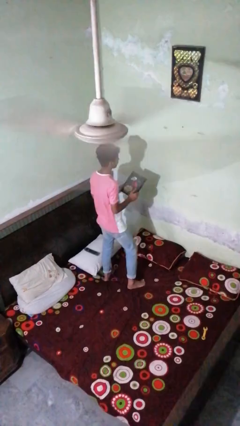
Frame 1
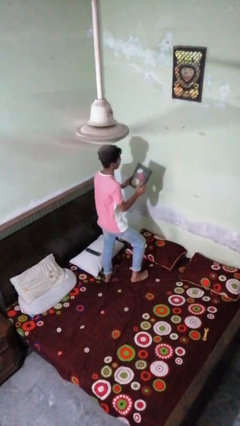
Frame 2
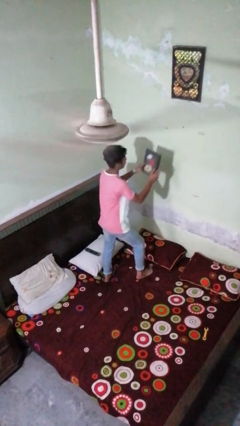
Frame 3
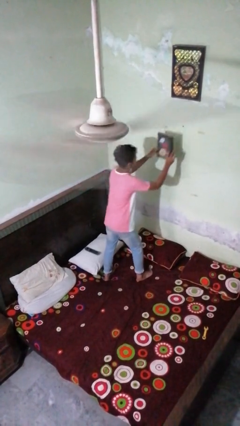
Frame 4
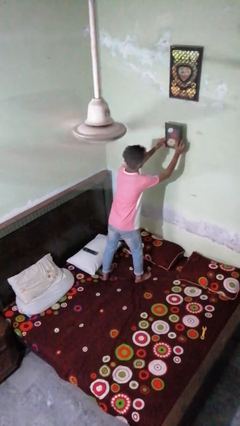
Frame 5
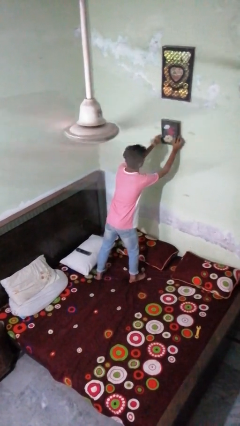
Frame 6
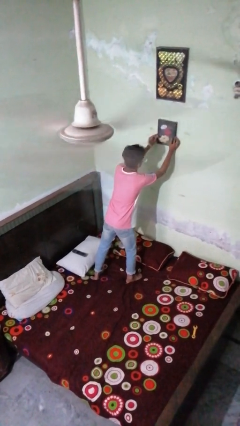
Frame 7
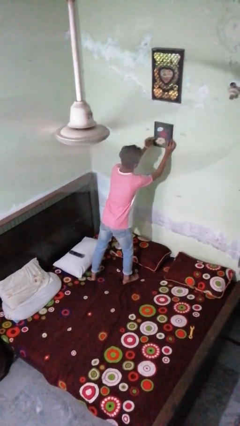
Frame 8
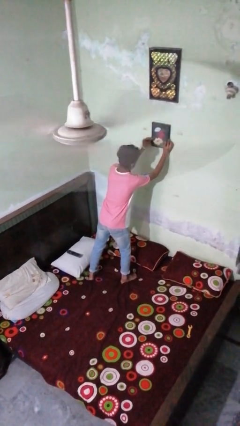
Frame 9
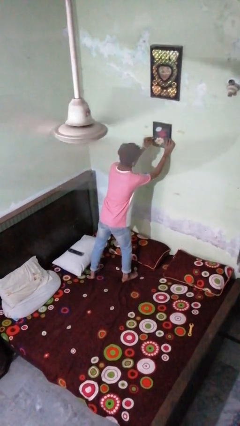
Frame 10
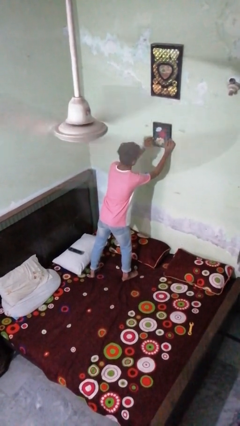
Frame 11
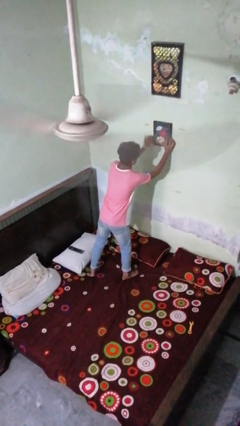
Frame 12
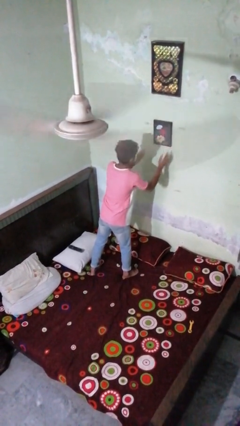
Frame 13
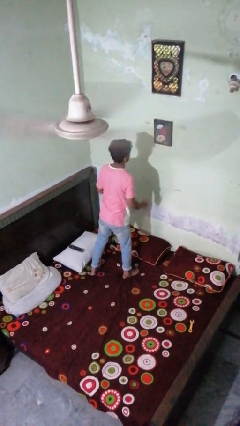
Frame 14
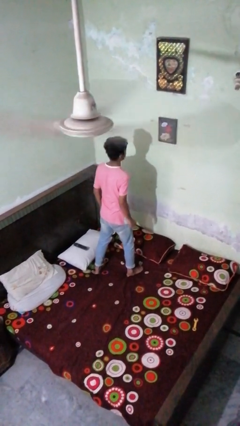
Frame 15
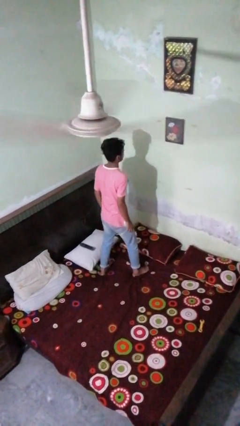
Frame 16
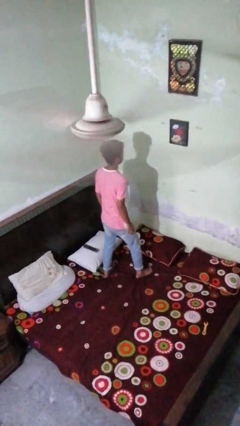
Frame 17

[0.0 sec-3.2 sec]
person puts up picture frame

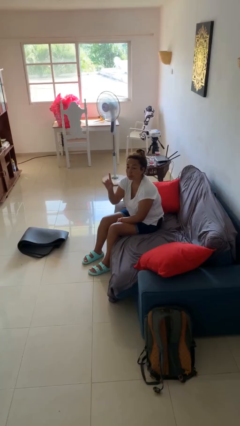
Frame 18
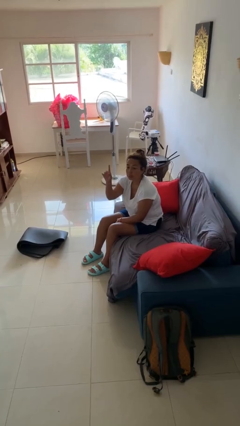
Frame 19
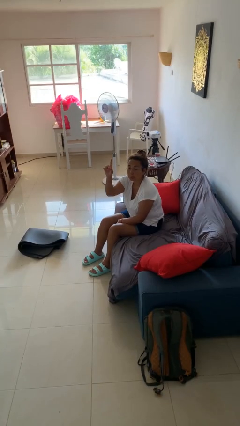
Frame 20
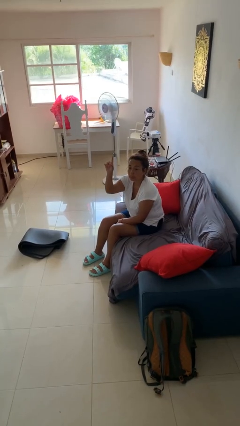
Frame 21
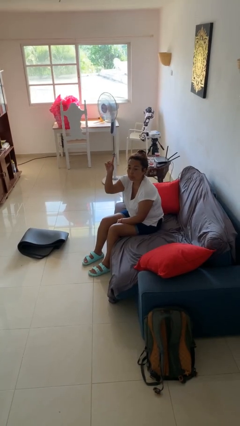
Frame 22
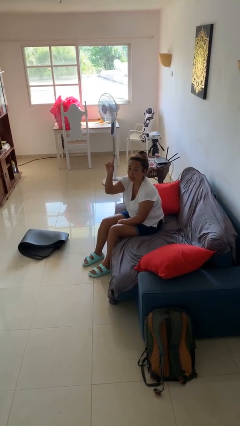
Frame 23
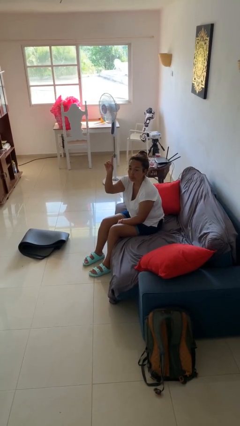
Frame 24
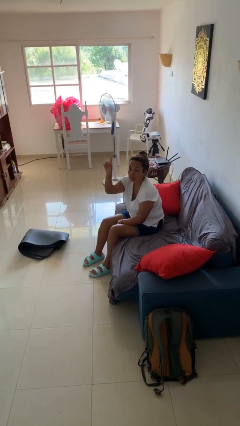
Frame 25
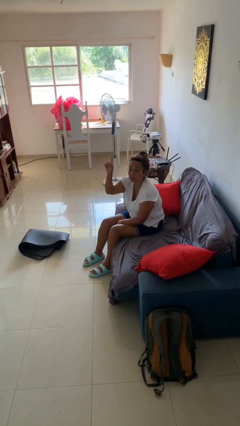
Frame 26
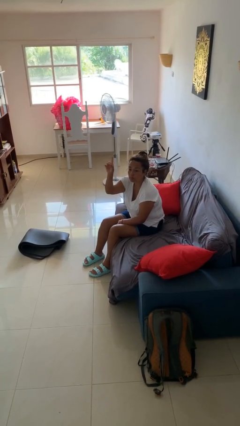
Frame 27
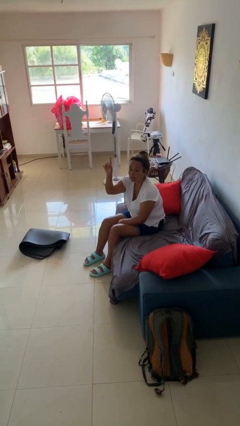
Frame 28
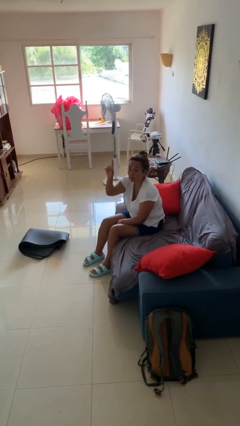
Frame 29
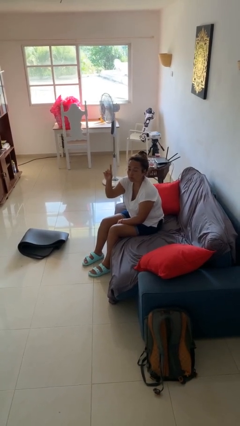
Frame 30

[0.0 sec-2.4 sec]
person gestures raise hand

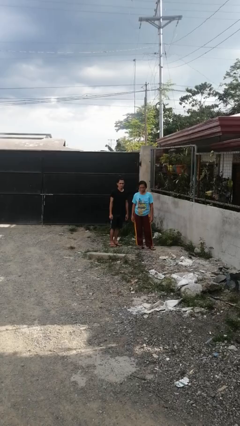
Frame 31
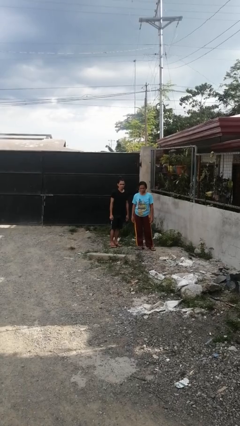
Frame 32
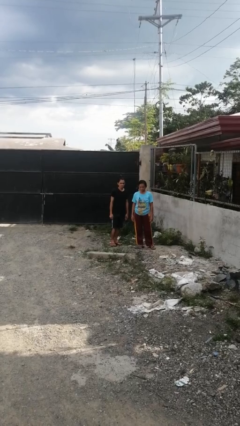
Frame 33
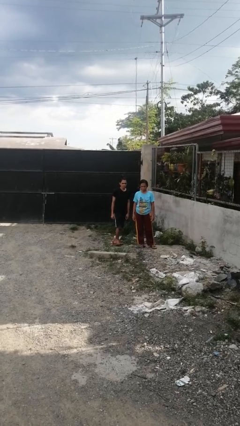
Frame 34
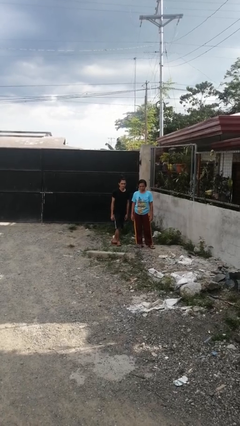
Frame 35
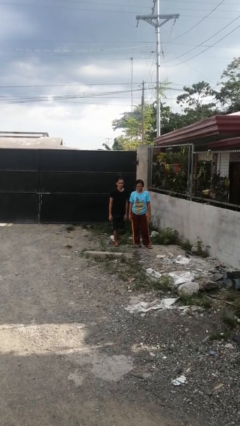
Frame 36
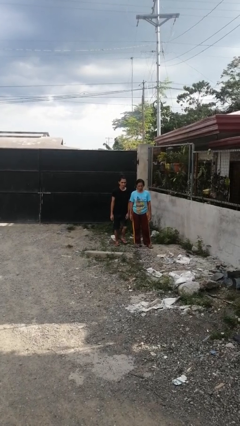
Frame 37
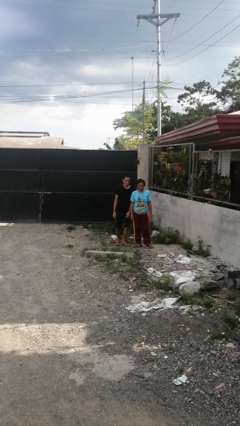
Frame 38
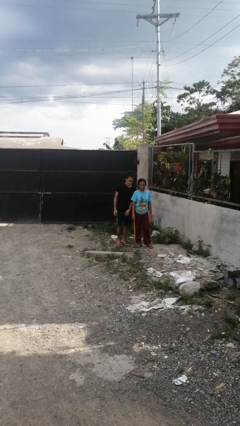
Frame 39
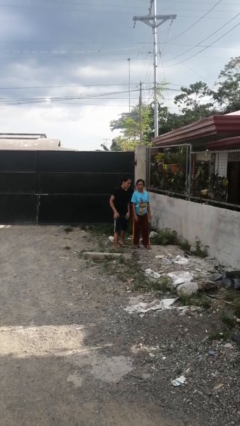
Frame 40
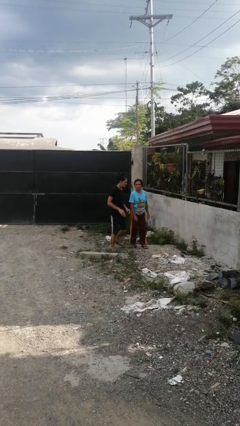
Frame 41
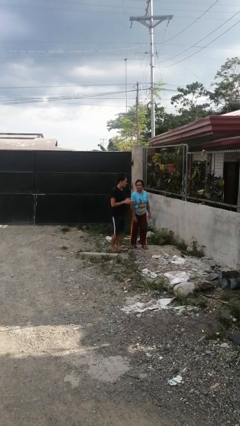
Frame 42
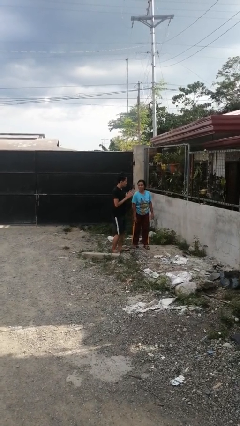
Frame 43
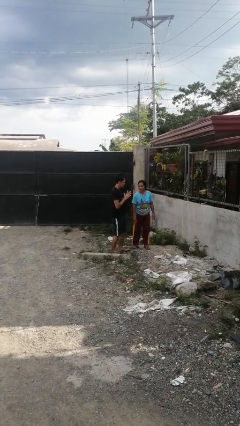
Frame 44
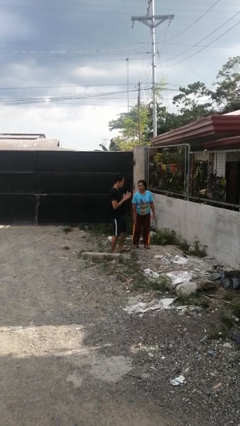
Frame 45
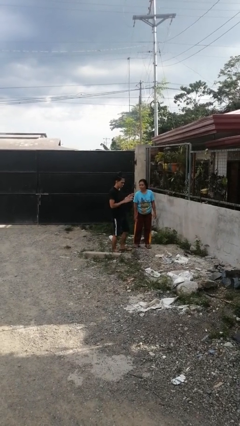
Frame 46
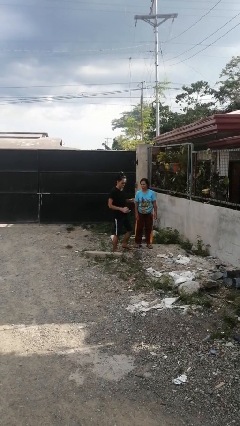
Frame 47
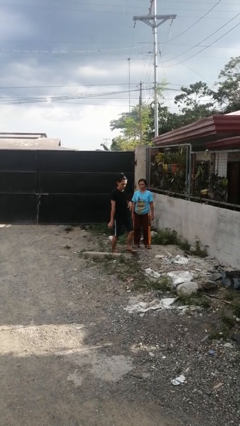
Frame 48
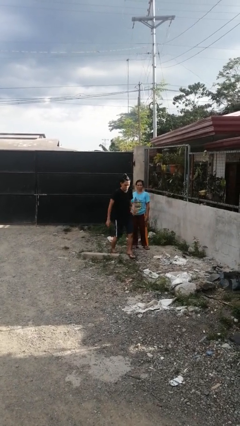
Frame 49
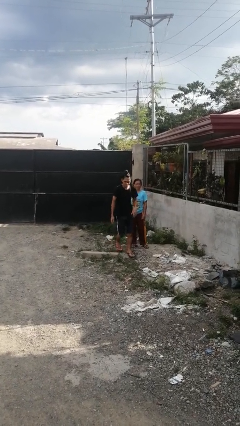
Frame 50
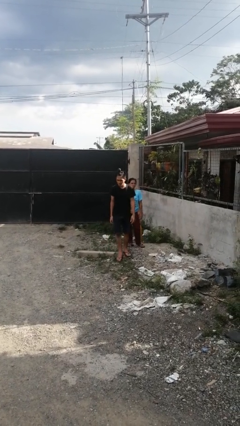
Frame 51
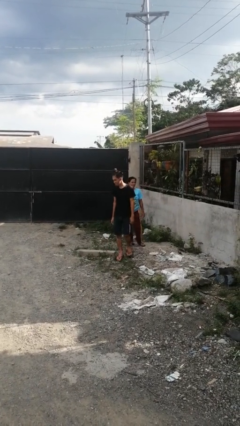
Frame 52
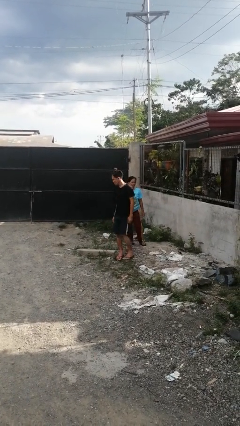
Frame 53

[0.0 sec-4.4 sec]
person bumps into person

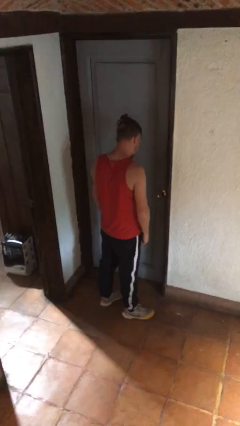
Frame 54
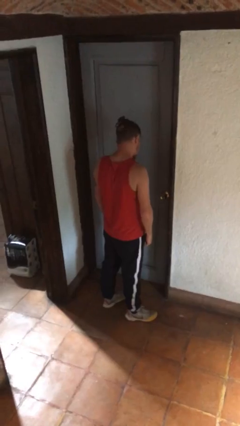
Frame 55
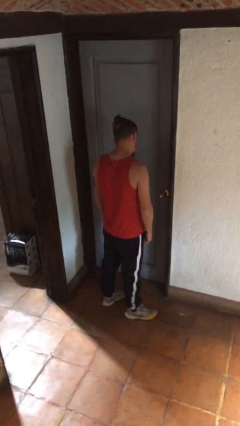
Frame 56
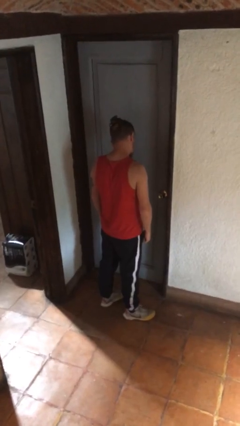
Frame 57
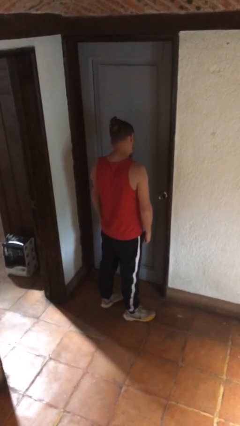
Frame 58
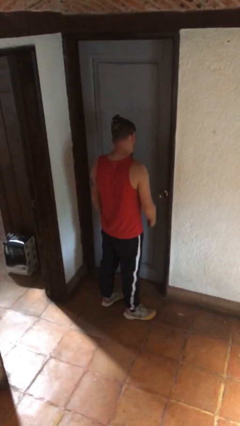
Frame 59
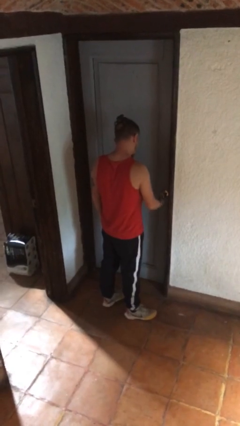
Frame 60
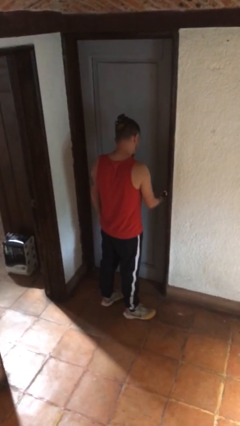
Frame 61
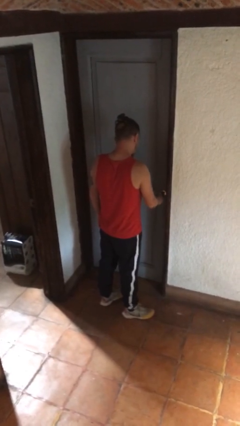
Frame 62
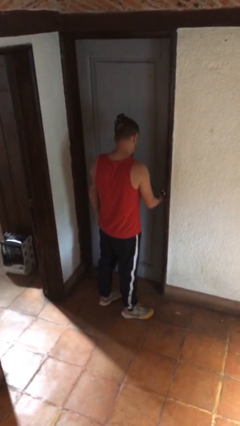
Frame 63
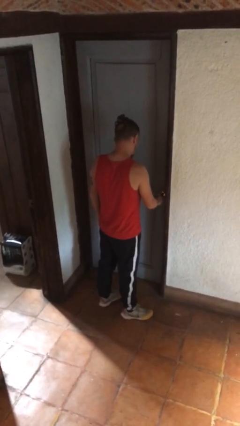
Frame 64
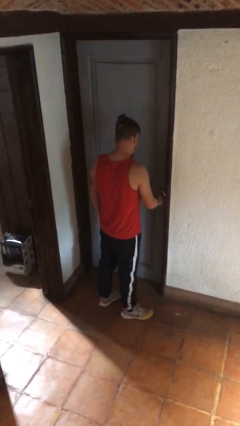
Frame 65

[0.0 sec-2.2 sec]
person unlocks door with keys

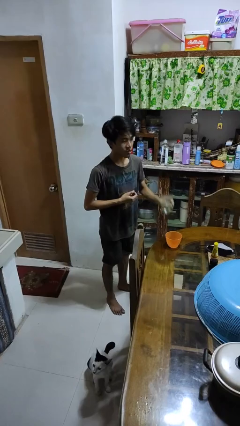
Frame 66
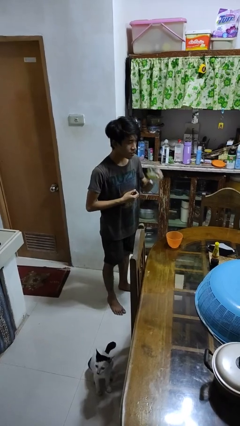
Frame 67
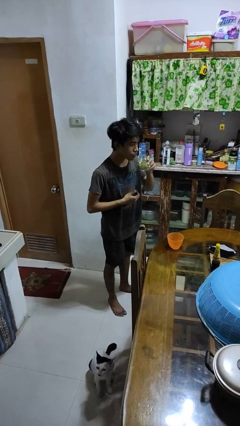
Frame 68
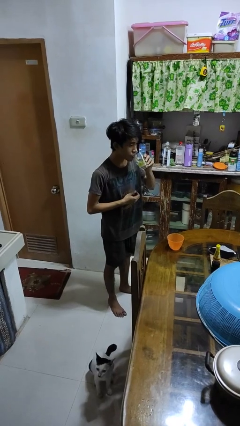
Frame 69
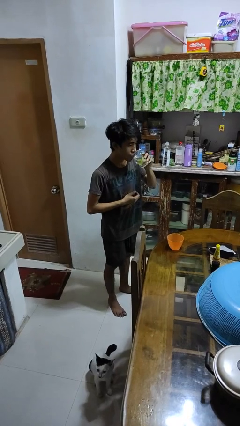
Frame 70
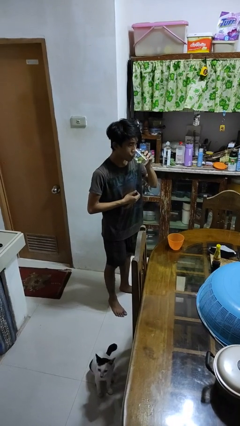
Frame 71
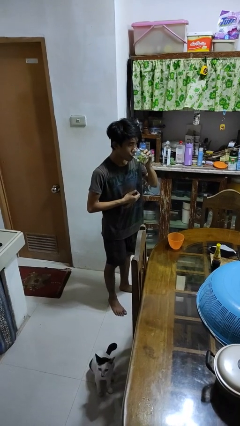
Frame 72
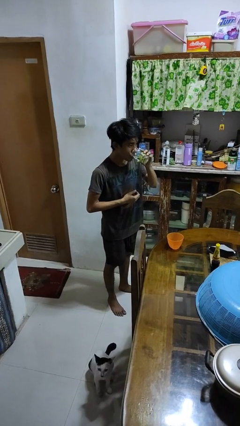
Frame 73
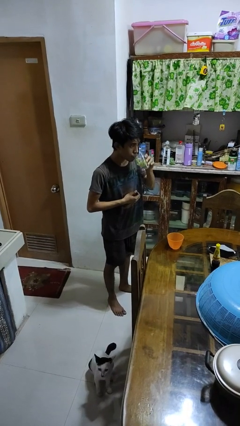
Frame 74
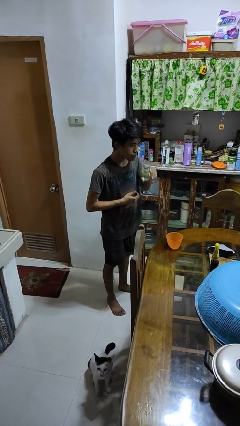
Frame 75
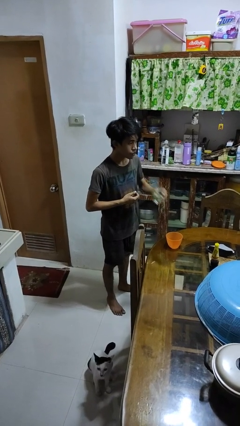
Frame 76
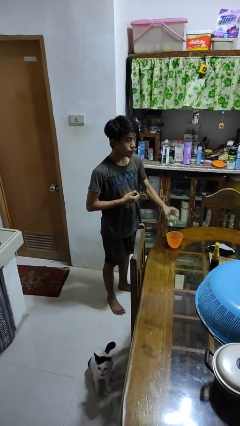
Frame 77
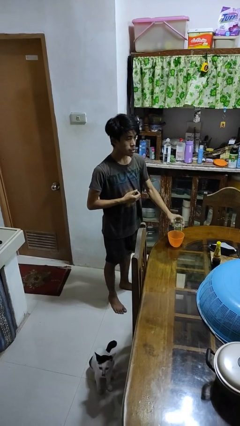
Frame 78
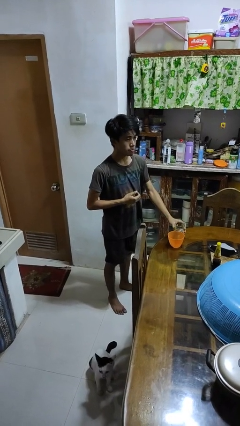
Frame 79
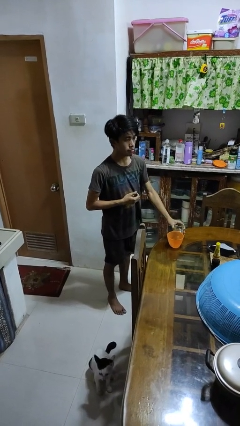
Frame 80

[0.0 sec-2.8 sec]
person drinks from cup

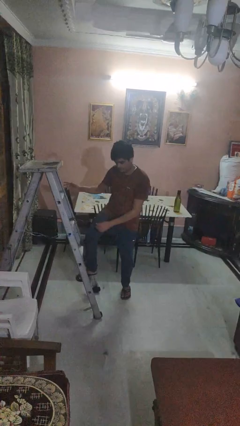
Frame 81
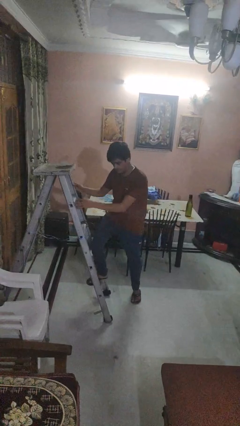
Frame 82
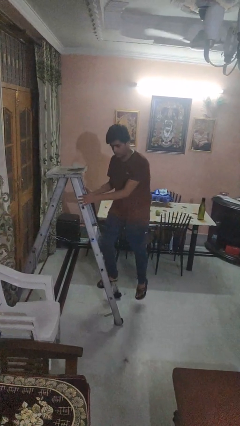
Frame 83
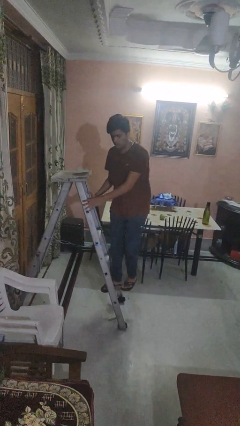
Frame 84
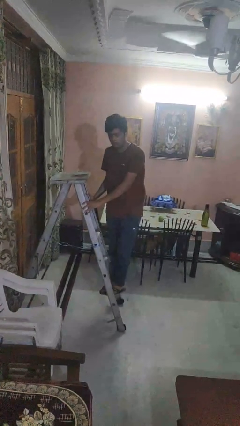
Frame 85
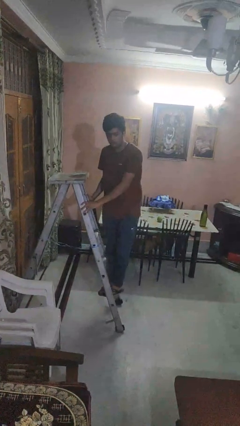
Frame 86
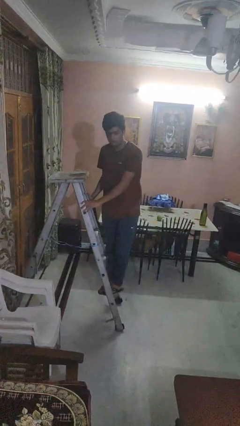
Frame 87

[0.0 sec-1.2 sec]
person climbs up ladder

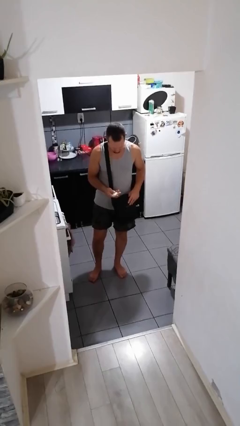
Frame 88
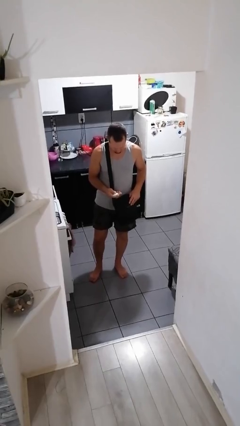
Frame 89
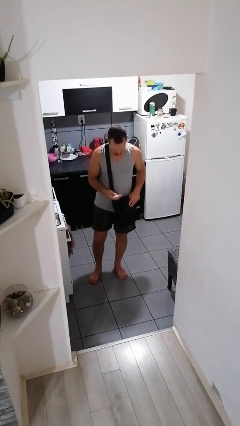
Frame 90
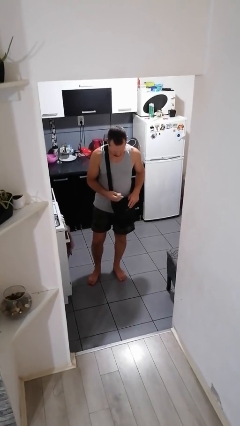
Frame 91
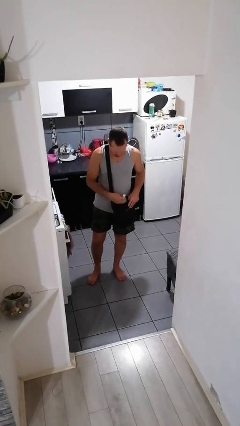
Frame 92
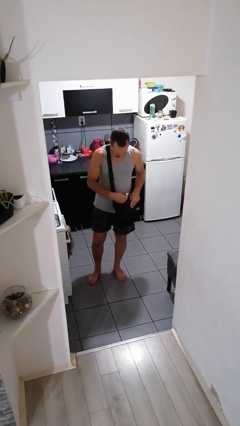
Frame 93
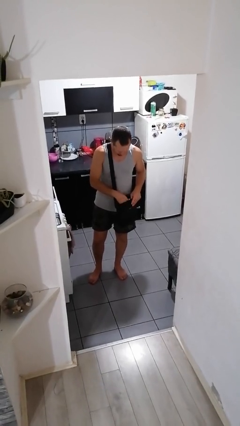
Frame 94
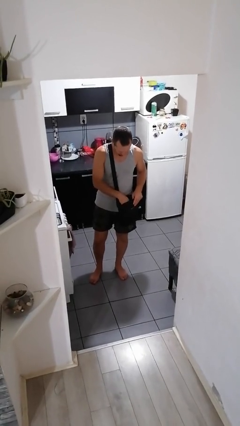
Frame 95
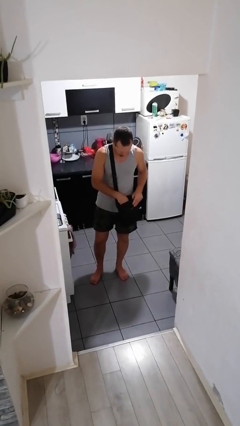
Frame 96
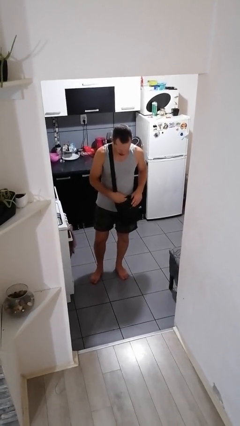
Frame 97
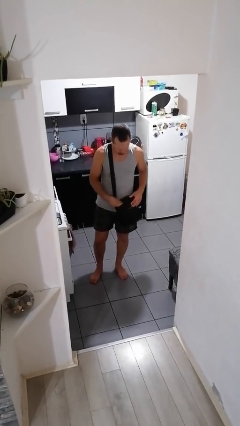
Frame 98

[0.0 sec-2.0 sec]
person puts object into purse
